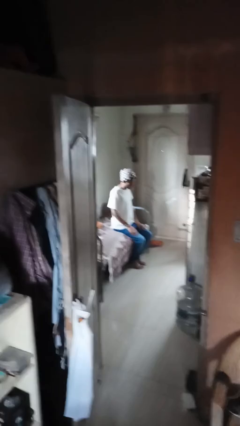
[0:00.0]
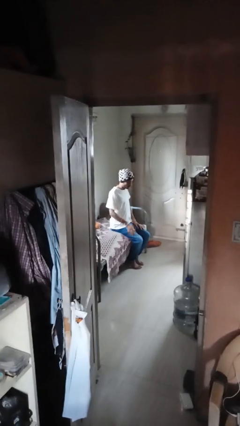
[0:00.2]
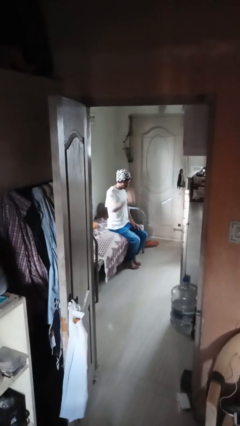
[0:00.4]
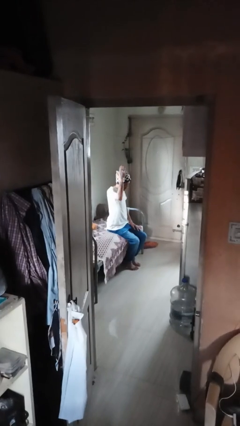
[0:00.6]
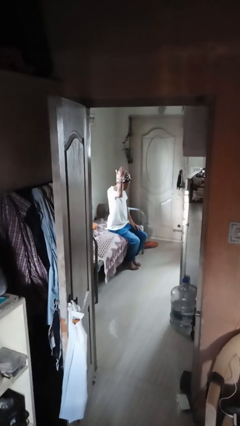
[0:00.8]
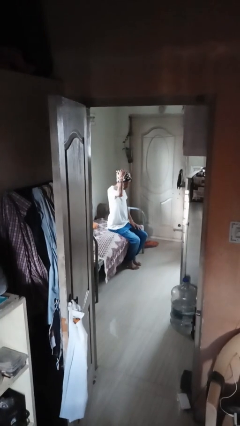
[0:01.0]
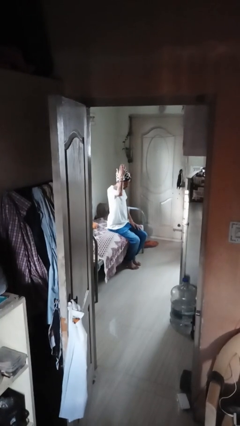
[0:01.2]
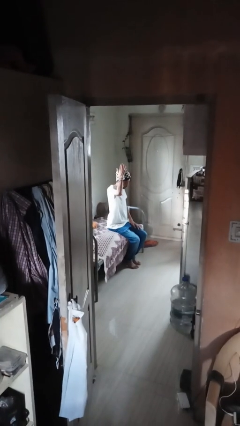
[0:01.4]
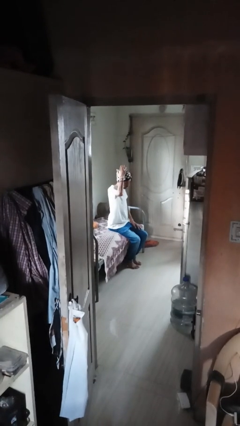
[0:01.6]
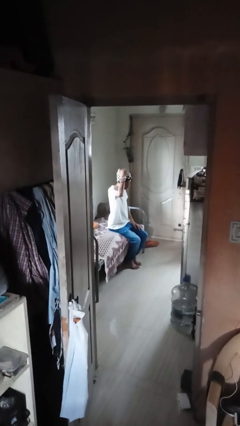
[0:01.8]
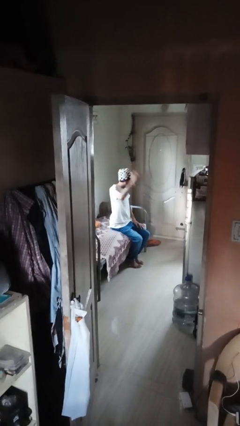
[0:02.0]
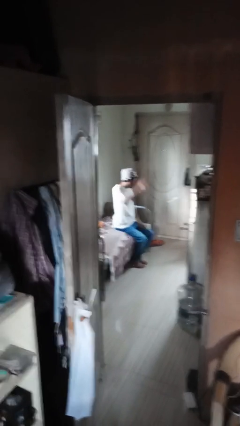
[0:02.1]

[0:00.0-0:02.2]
person pats head

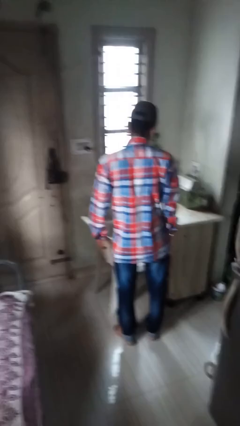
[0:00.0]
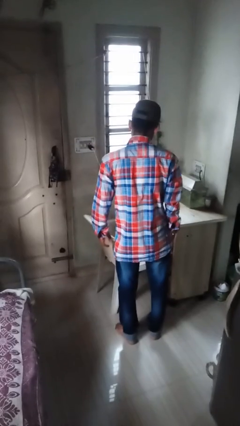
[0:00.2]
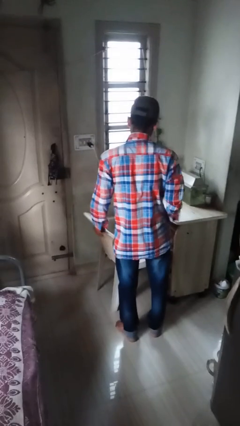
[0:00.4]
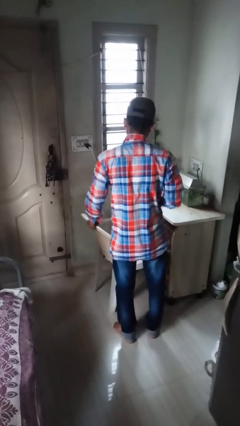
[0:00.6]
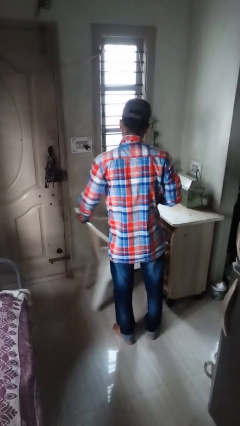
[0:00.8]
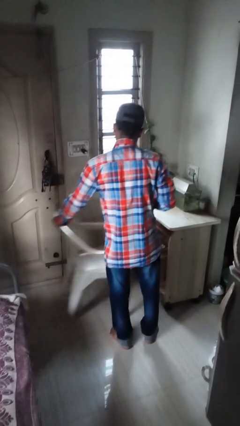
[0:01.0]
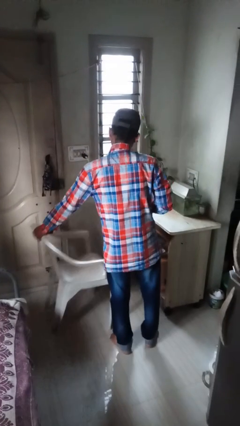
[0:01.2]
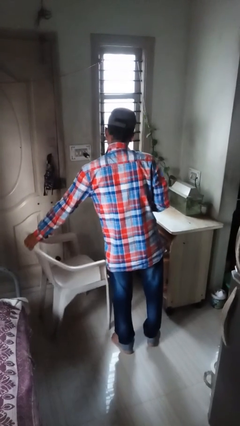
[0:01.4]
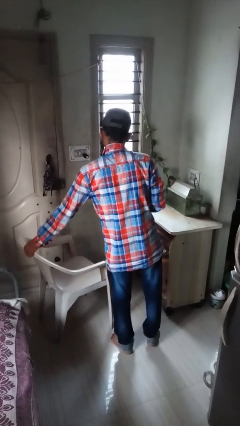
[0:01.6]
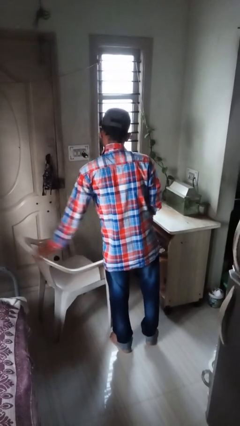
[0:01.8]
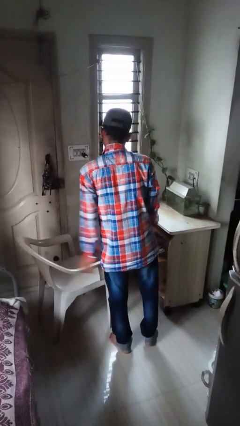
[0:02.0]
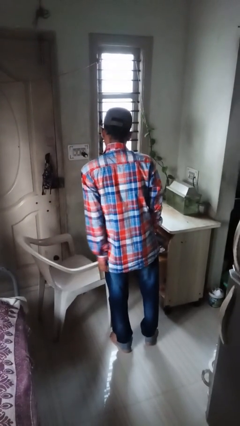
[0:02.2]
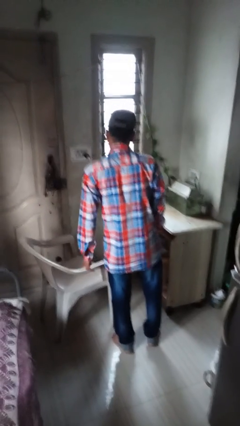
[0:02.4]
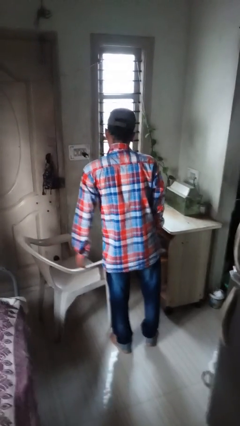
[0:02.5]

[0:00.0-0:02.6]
person pulls out chair

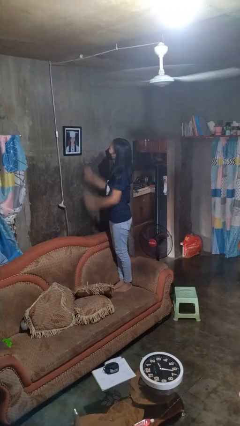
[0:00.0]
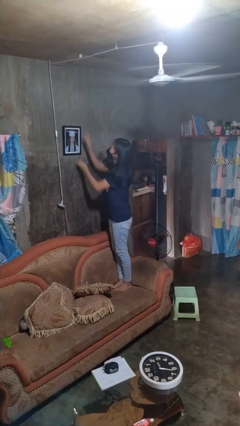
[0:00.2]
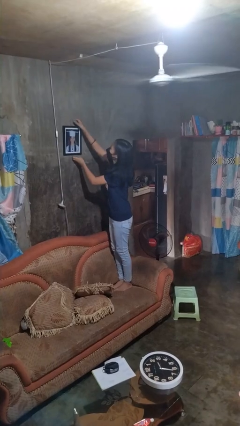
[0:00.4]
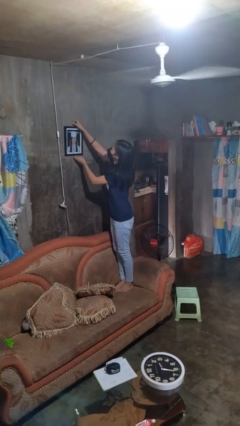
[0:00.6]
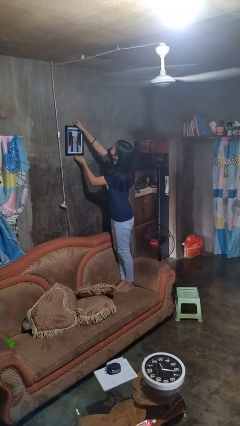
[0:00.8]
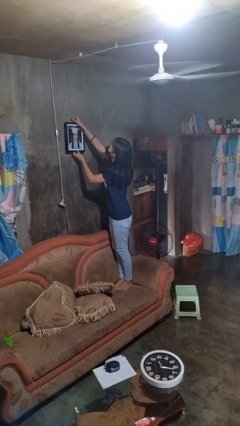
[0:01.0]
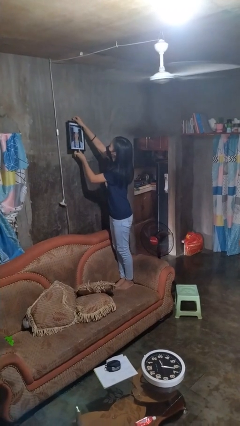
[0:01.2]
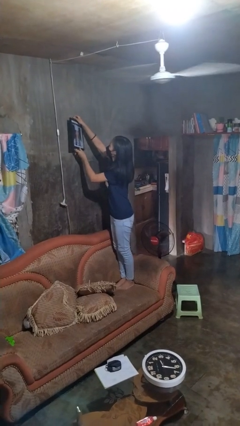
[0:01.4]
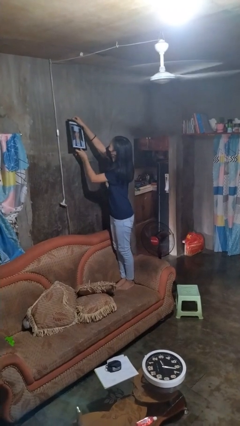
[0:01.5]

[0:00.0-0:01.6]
person takes down picture frame

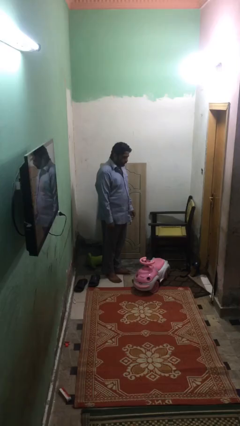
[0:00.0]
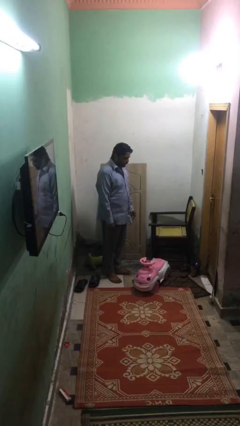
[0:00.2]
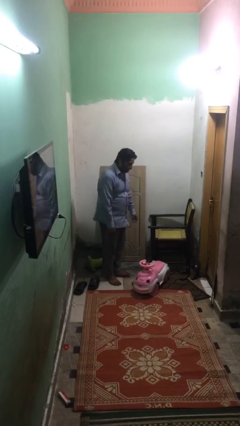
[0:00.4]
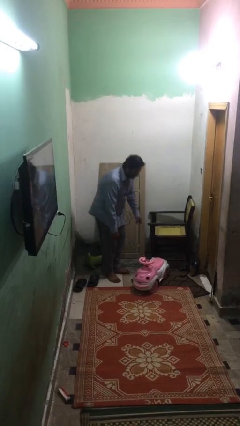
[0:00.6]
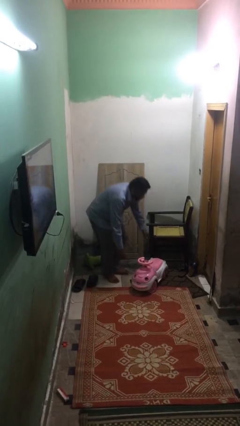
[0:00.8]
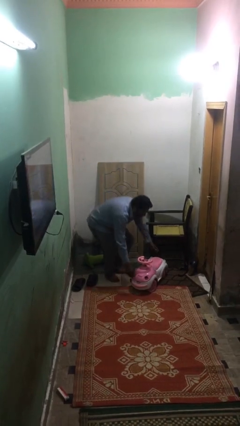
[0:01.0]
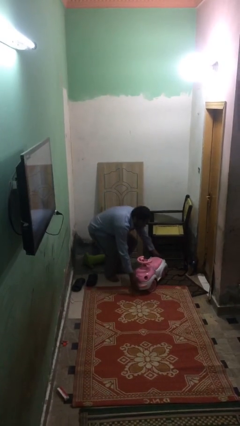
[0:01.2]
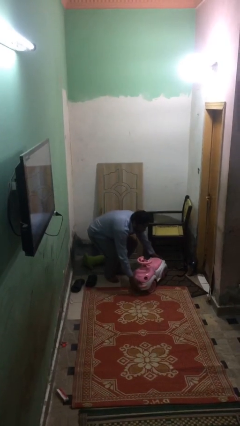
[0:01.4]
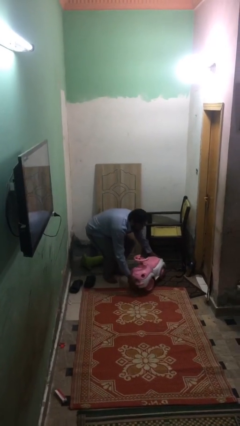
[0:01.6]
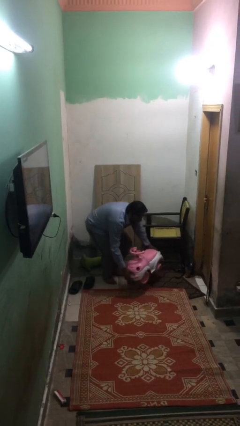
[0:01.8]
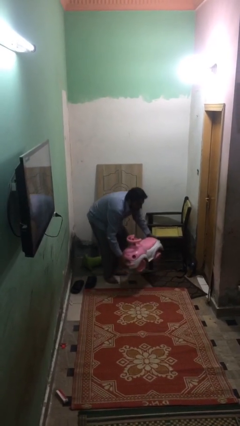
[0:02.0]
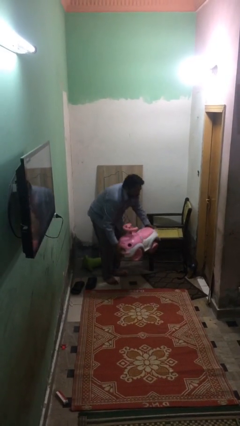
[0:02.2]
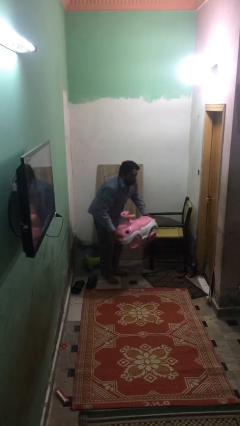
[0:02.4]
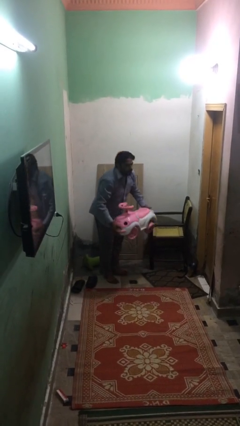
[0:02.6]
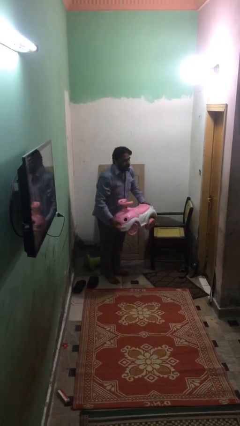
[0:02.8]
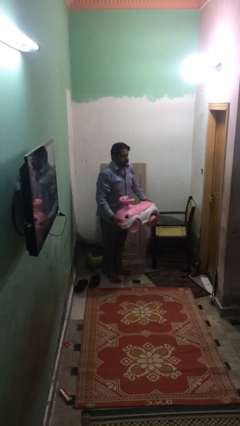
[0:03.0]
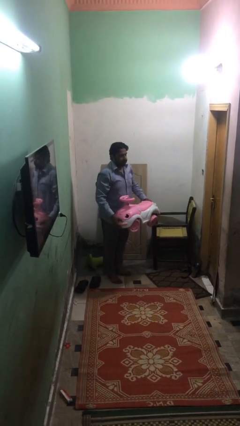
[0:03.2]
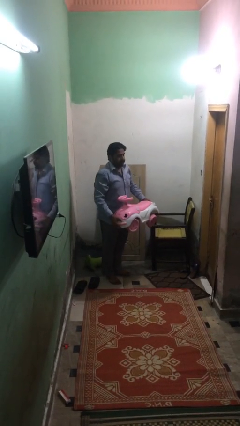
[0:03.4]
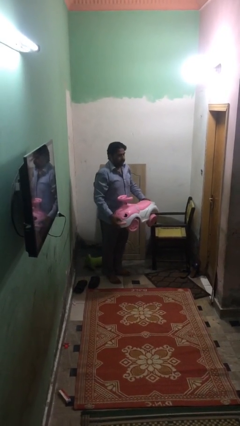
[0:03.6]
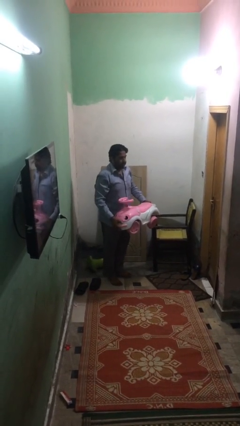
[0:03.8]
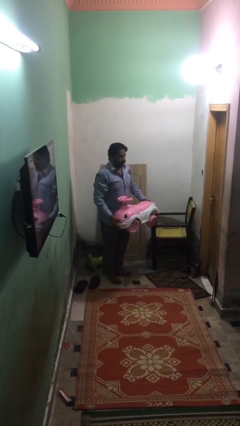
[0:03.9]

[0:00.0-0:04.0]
person picks up object from floor

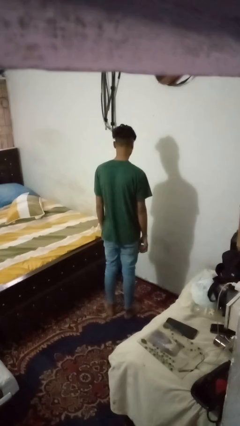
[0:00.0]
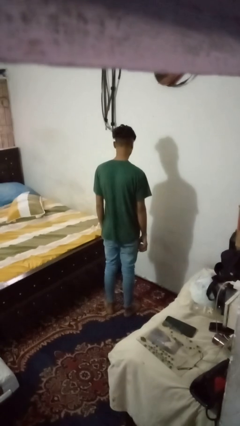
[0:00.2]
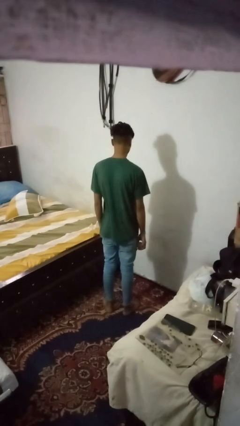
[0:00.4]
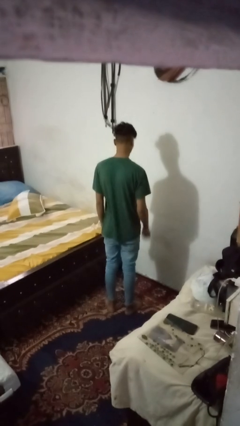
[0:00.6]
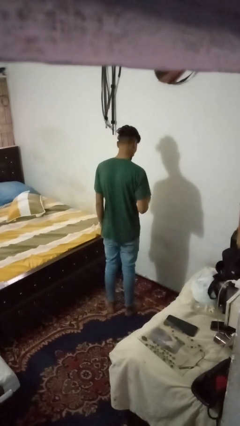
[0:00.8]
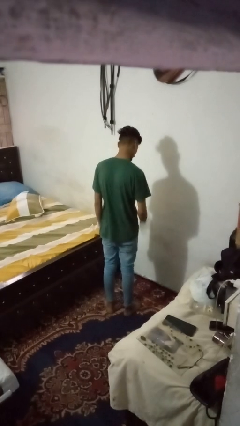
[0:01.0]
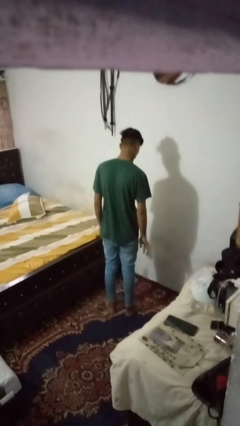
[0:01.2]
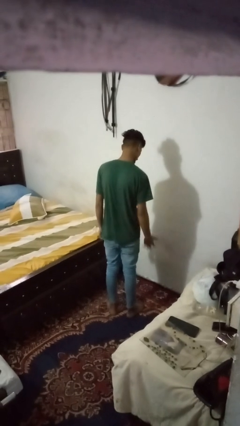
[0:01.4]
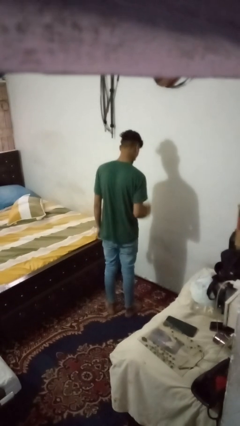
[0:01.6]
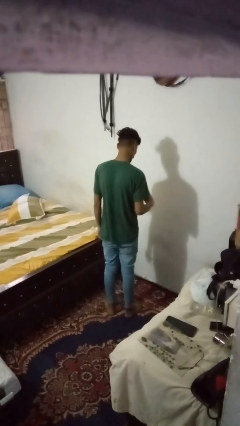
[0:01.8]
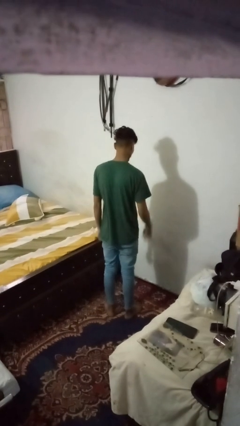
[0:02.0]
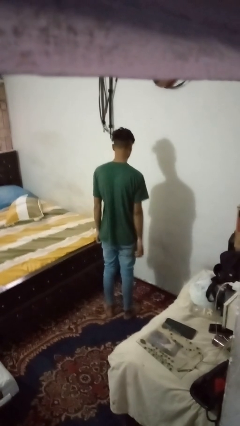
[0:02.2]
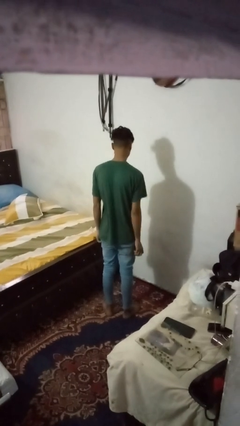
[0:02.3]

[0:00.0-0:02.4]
person bounces ball on floor

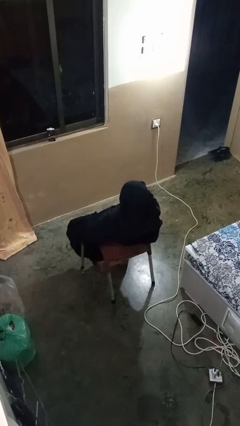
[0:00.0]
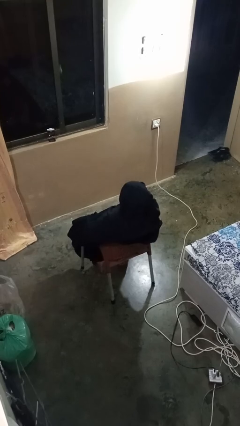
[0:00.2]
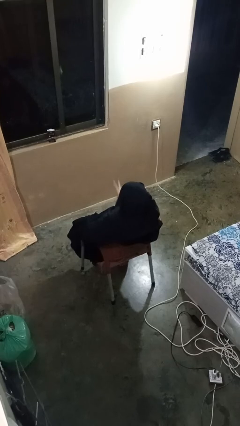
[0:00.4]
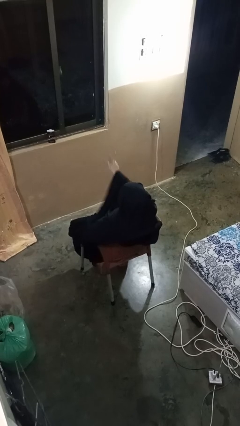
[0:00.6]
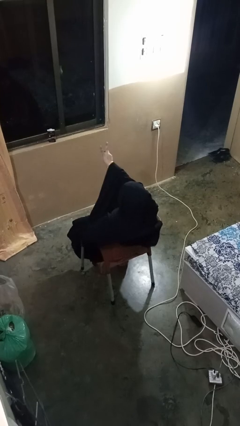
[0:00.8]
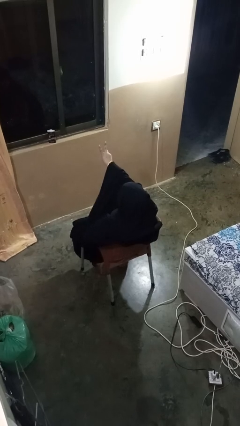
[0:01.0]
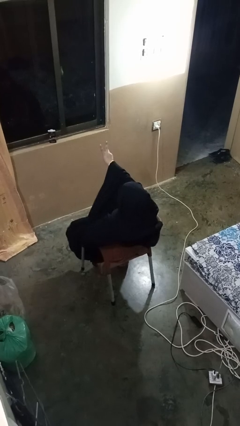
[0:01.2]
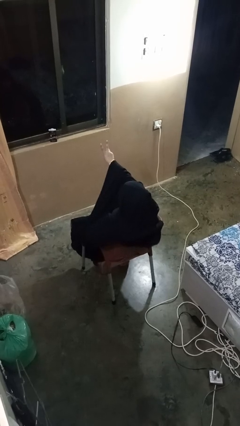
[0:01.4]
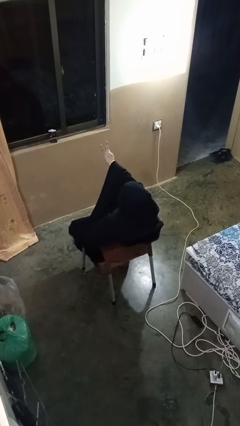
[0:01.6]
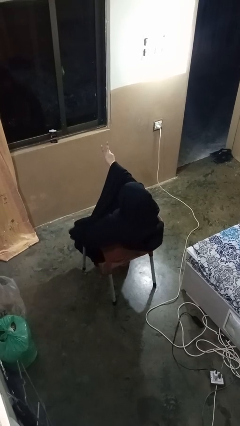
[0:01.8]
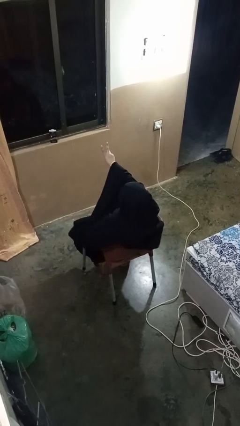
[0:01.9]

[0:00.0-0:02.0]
person gestures peace

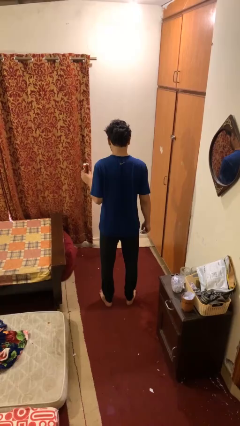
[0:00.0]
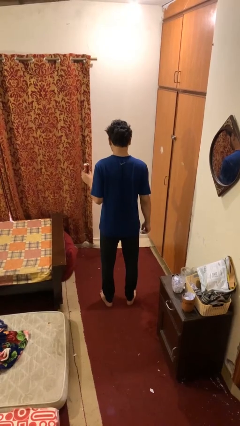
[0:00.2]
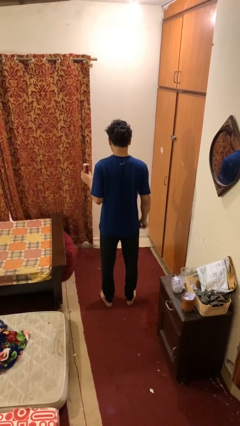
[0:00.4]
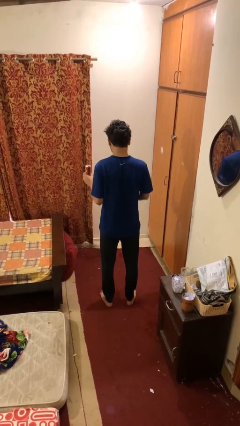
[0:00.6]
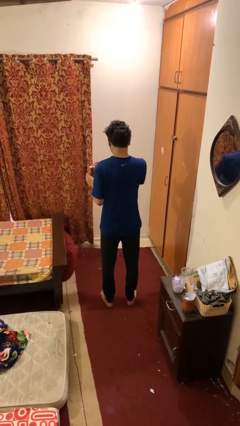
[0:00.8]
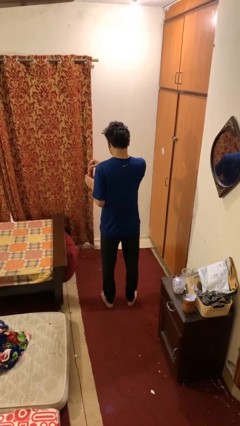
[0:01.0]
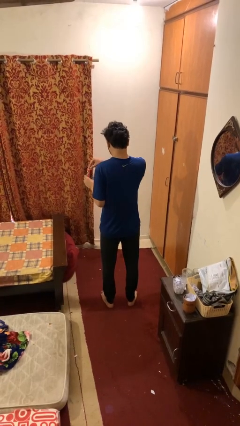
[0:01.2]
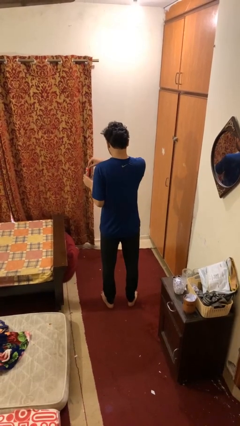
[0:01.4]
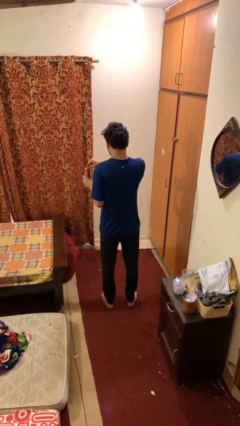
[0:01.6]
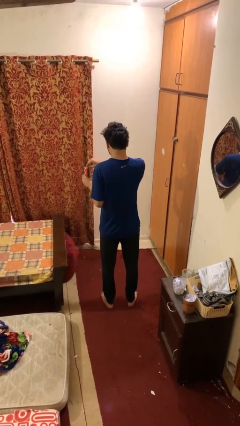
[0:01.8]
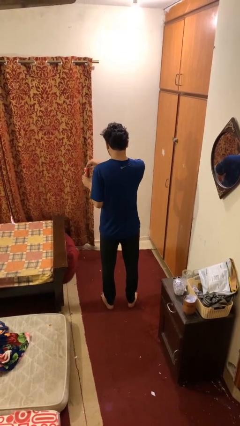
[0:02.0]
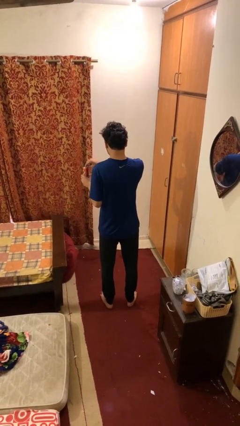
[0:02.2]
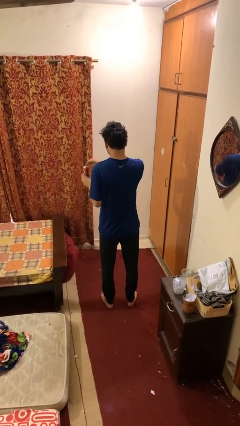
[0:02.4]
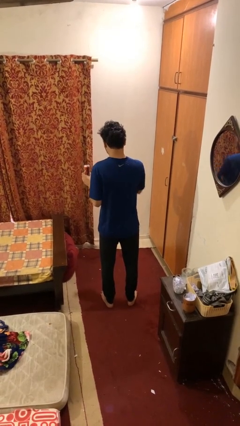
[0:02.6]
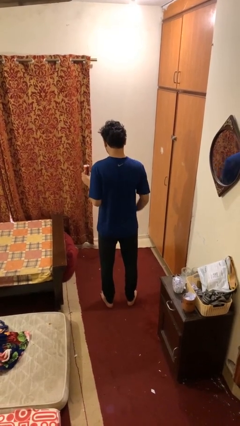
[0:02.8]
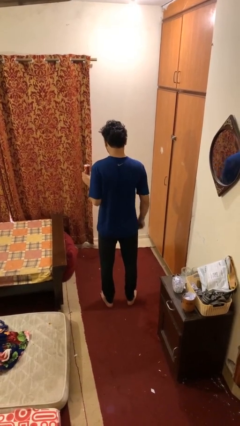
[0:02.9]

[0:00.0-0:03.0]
person opens beverage can
